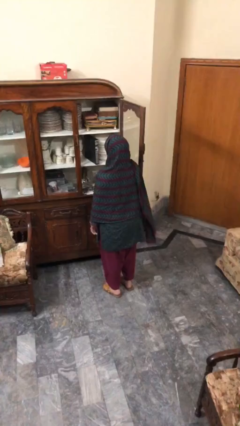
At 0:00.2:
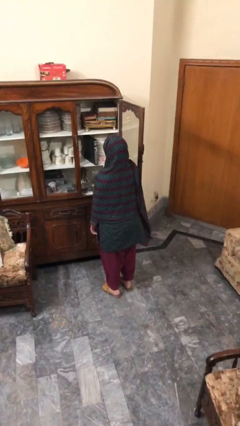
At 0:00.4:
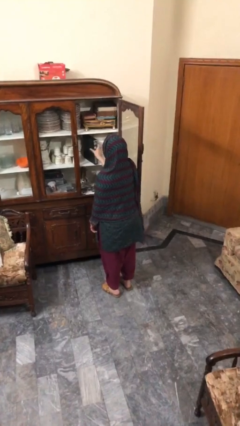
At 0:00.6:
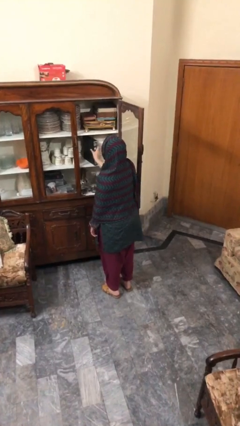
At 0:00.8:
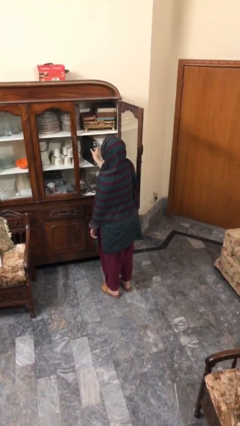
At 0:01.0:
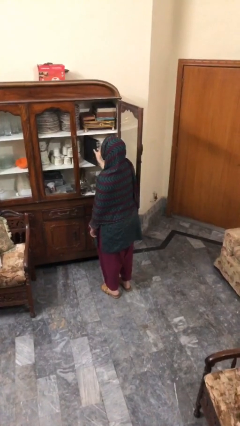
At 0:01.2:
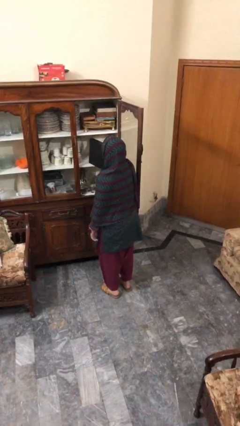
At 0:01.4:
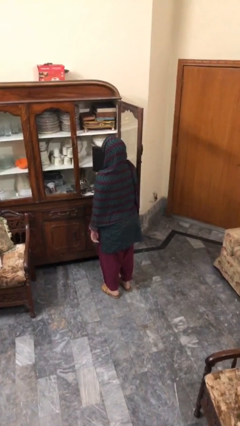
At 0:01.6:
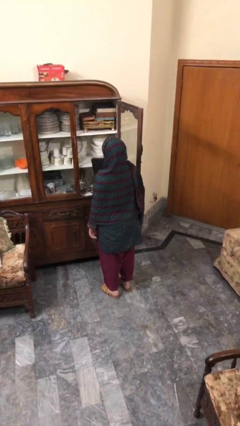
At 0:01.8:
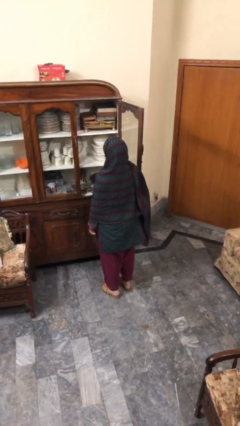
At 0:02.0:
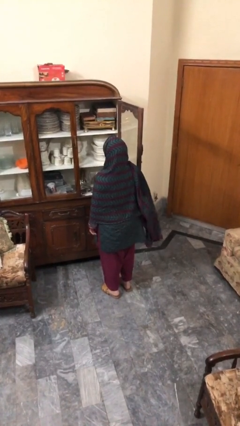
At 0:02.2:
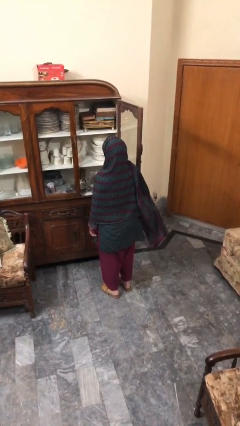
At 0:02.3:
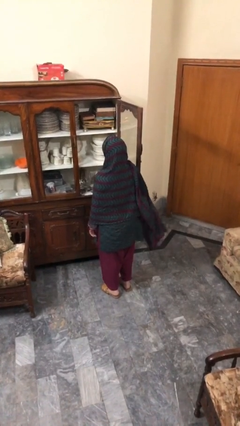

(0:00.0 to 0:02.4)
person picks up object from cabinet

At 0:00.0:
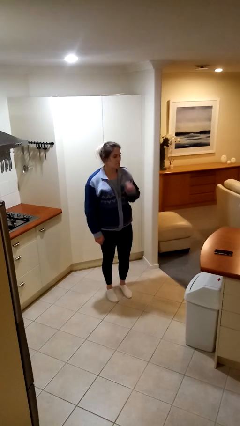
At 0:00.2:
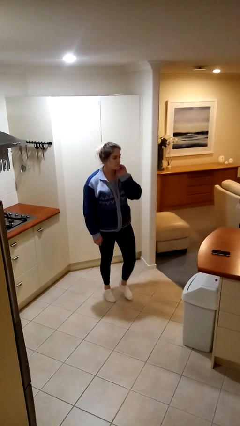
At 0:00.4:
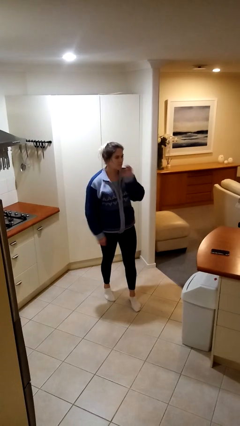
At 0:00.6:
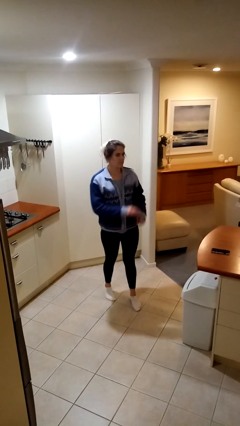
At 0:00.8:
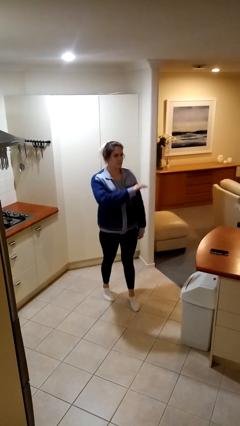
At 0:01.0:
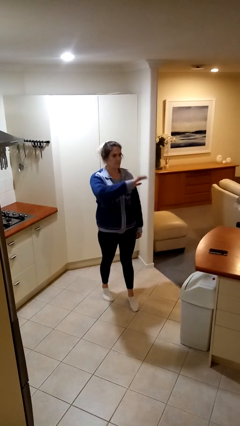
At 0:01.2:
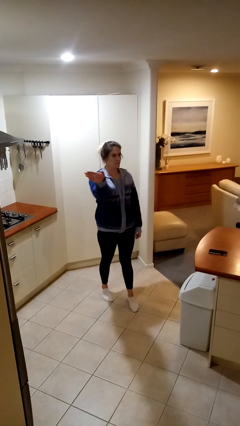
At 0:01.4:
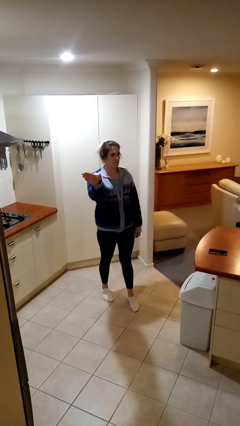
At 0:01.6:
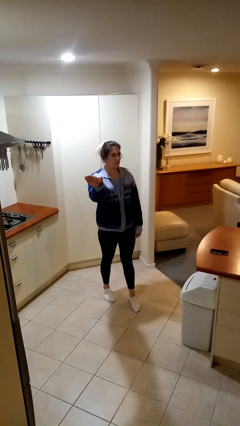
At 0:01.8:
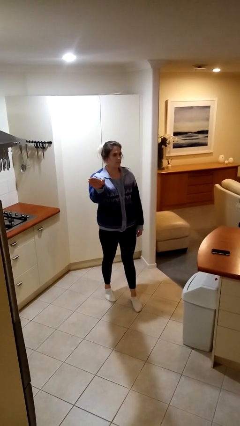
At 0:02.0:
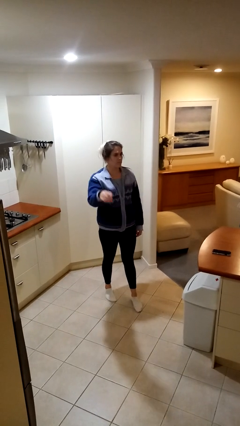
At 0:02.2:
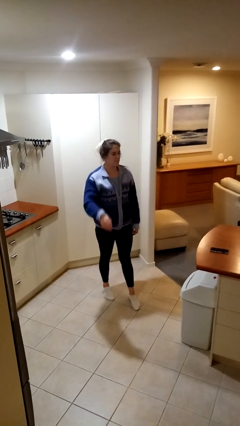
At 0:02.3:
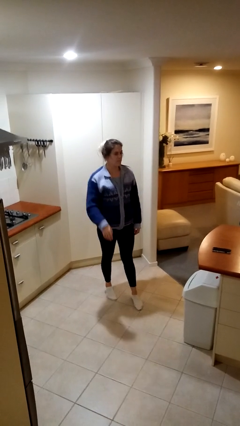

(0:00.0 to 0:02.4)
person gestures swipe right

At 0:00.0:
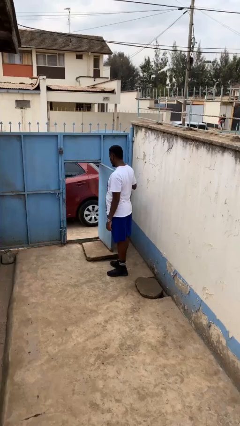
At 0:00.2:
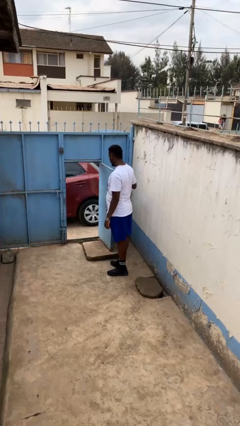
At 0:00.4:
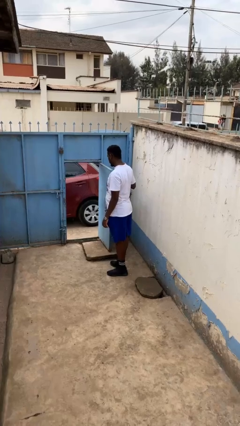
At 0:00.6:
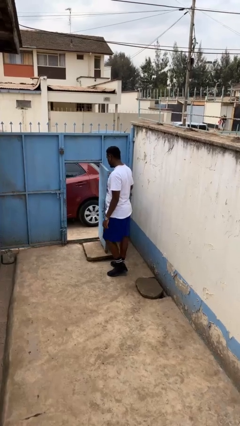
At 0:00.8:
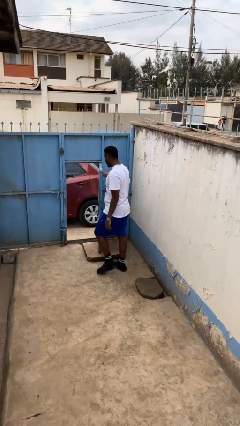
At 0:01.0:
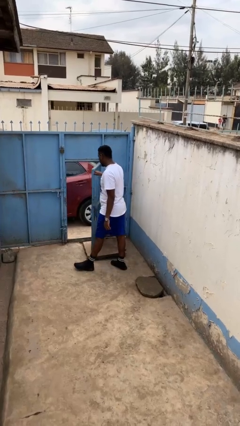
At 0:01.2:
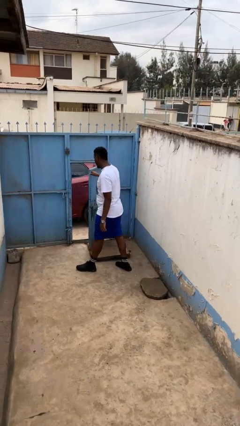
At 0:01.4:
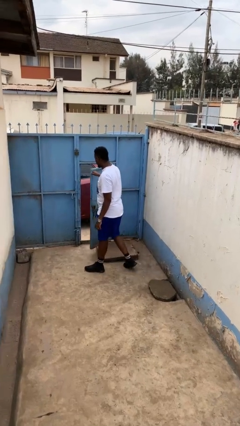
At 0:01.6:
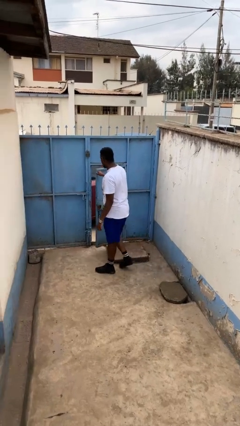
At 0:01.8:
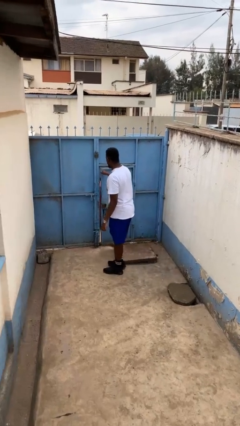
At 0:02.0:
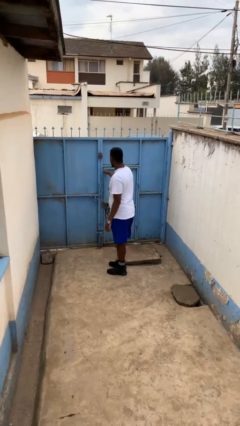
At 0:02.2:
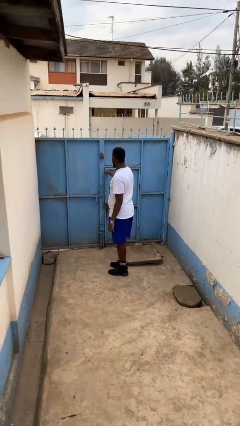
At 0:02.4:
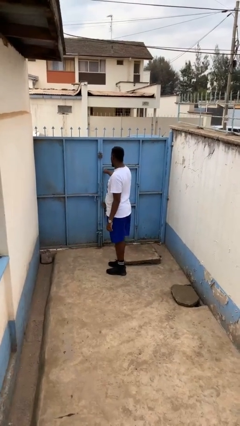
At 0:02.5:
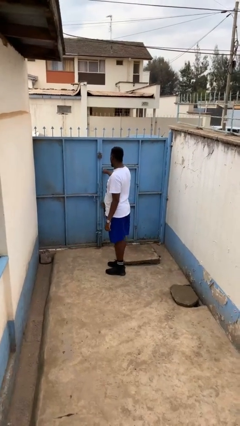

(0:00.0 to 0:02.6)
person closes gate

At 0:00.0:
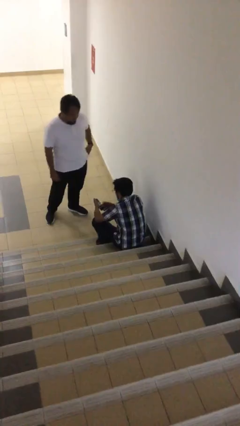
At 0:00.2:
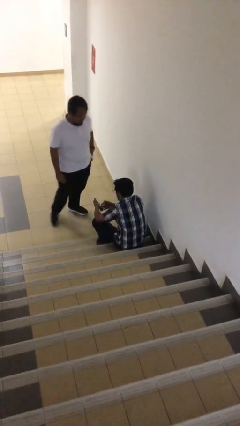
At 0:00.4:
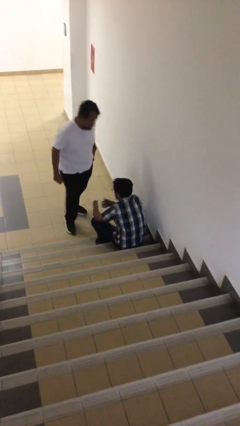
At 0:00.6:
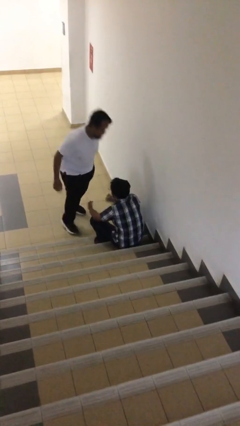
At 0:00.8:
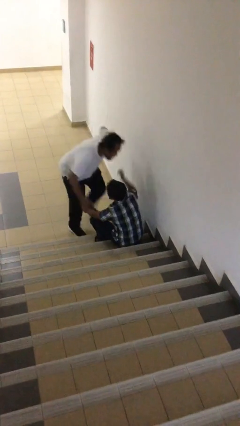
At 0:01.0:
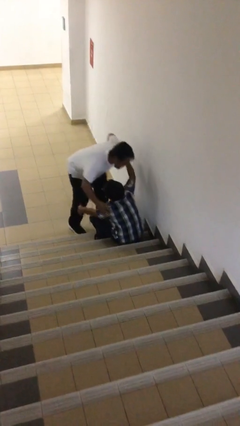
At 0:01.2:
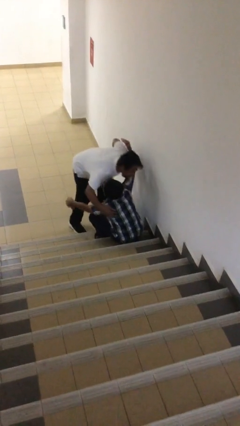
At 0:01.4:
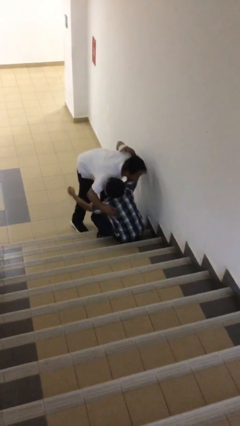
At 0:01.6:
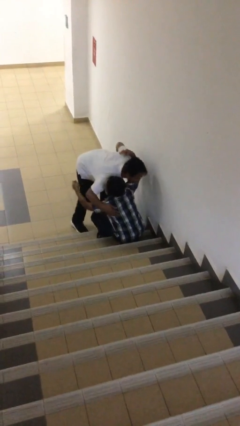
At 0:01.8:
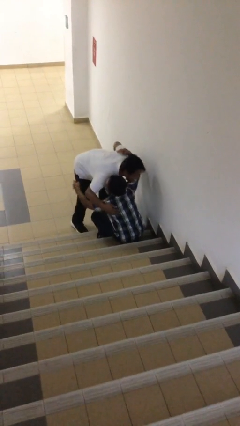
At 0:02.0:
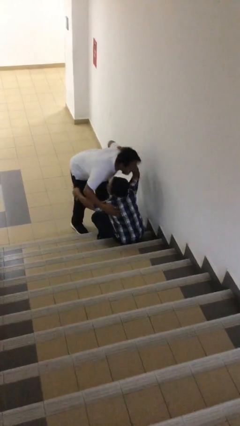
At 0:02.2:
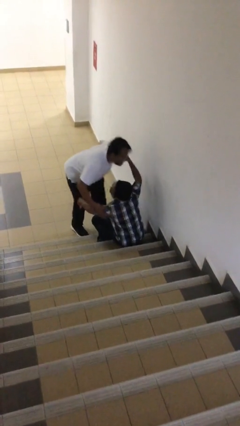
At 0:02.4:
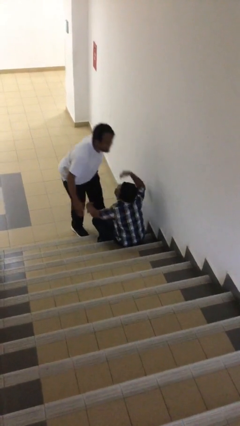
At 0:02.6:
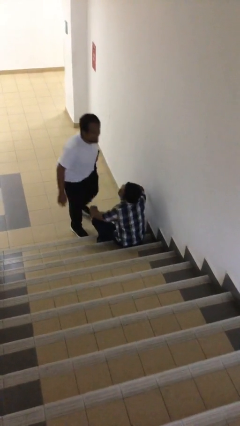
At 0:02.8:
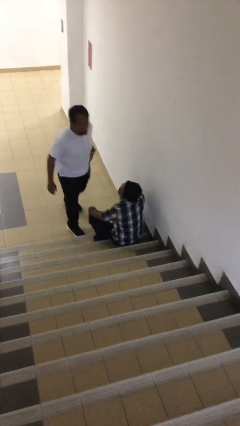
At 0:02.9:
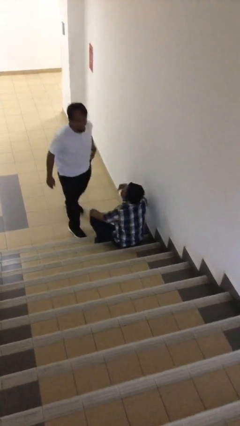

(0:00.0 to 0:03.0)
person embraces person

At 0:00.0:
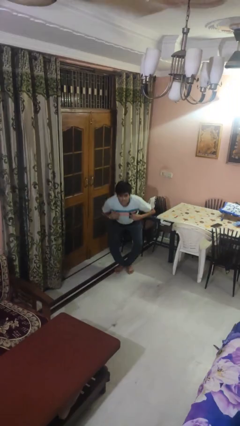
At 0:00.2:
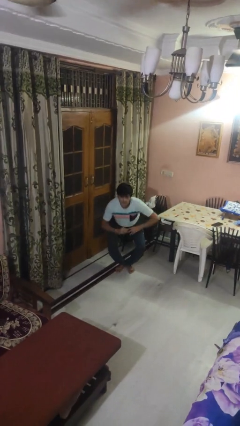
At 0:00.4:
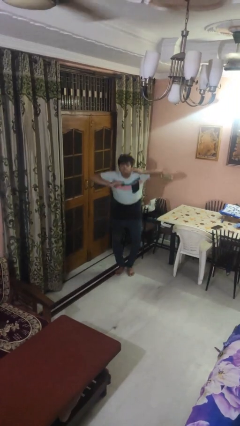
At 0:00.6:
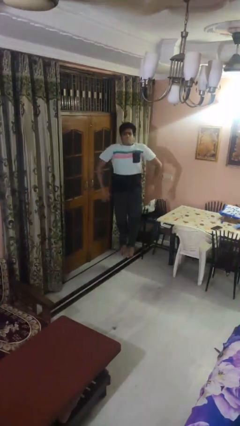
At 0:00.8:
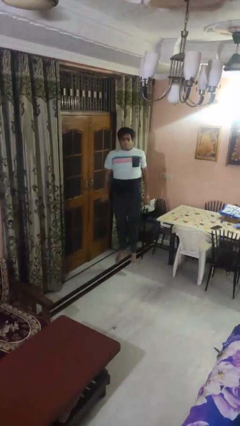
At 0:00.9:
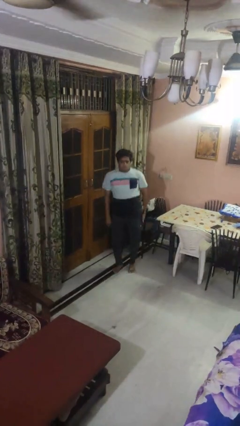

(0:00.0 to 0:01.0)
person jumps

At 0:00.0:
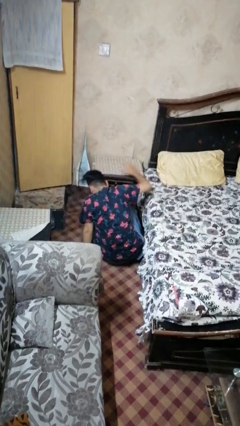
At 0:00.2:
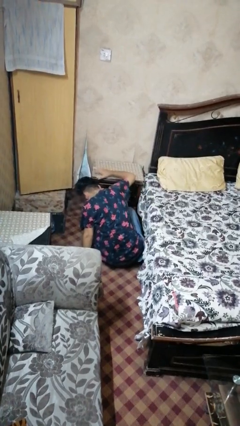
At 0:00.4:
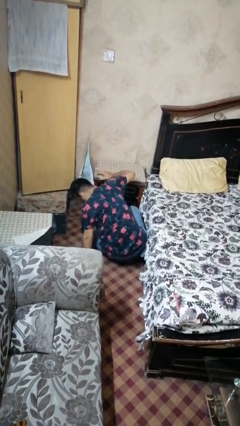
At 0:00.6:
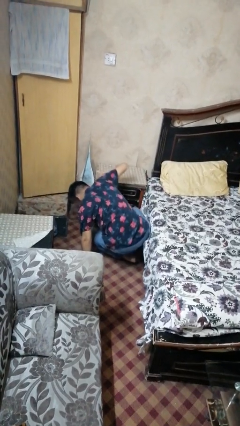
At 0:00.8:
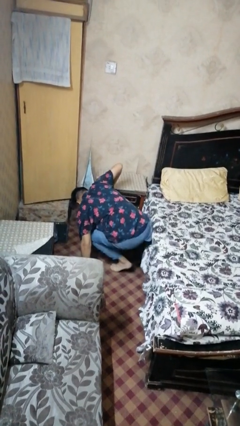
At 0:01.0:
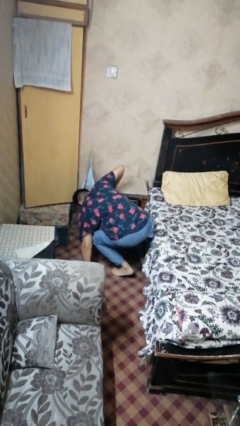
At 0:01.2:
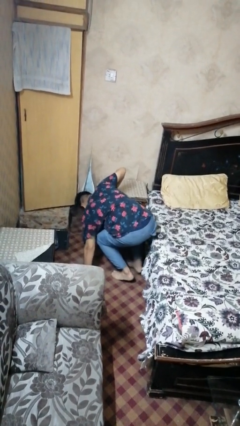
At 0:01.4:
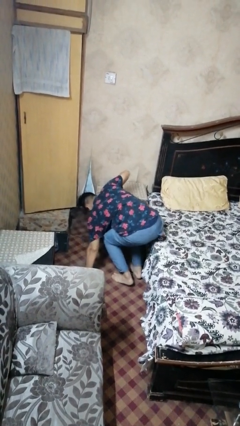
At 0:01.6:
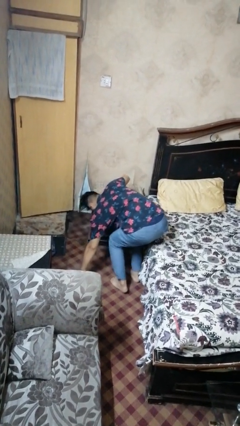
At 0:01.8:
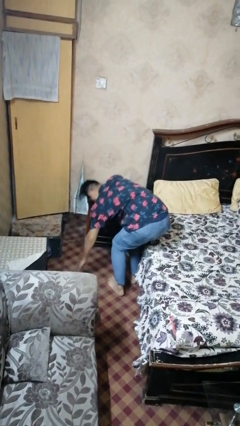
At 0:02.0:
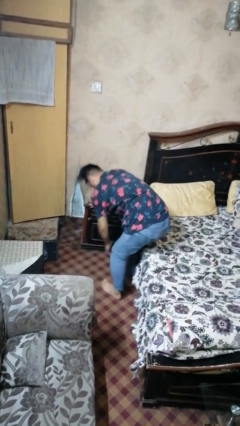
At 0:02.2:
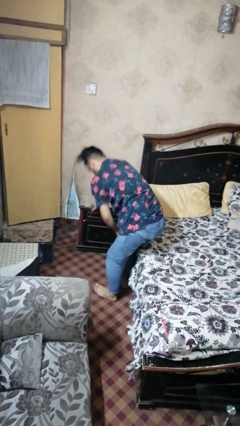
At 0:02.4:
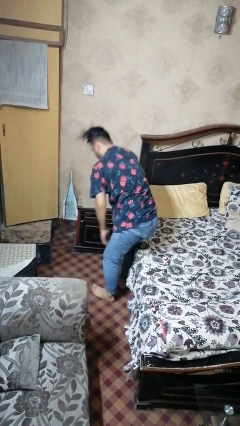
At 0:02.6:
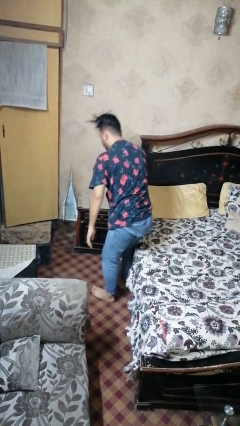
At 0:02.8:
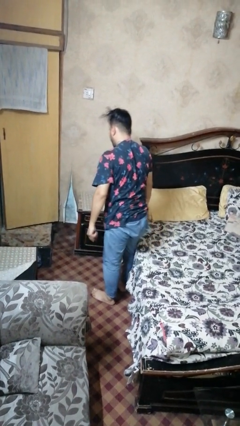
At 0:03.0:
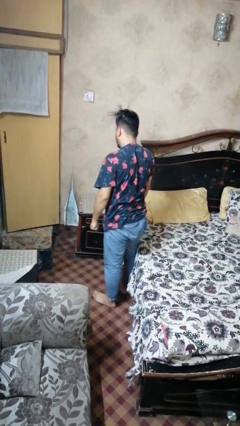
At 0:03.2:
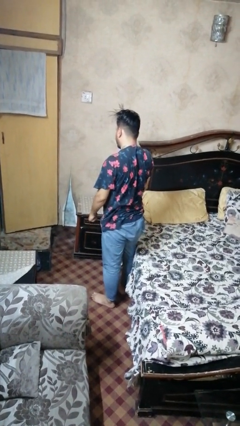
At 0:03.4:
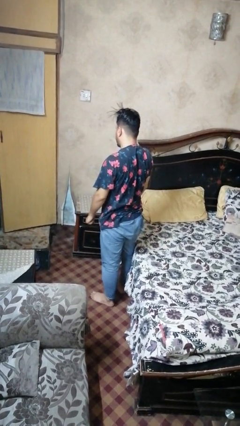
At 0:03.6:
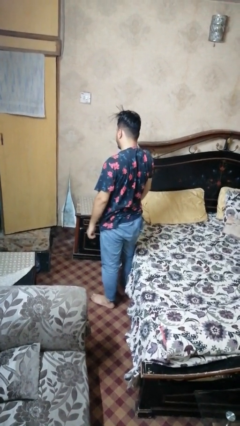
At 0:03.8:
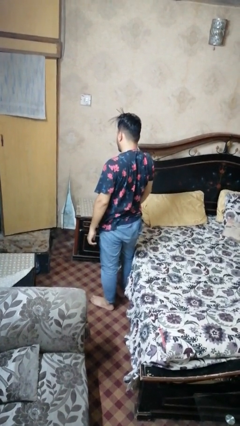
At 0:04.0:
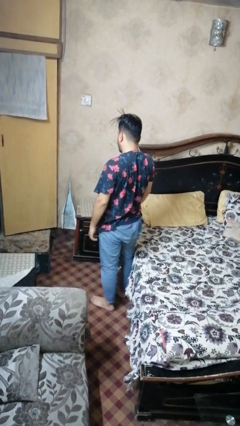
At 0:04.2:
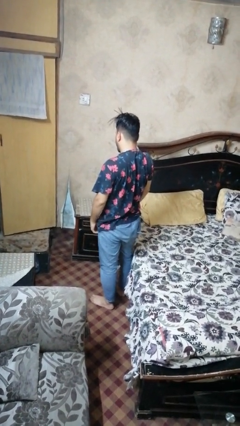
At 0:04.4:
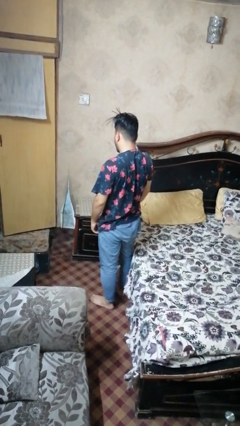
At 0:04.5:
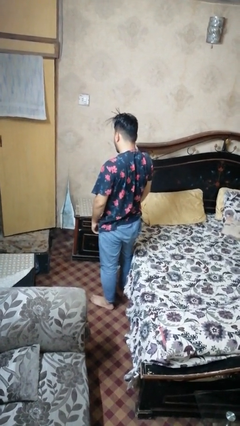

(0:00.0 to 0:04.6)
person stands up from floor

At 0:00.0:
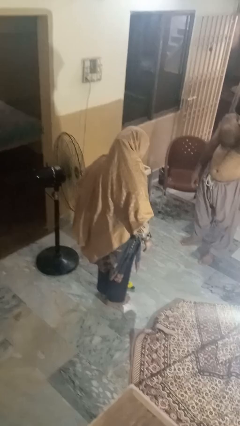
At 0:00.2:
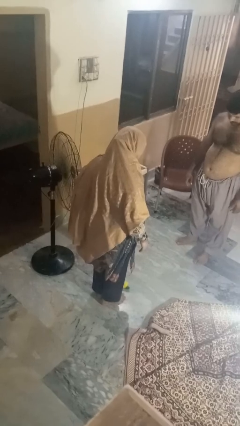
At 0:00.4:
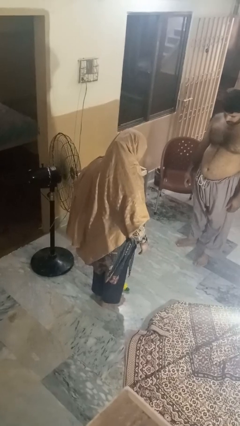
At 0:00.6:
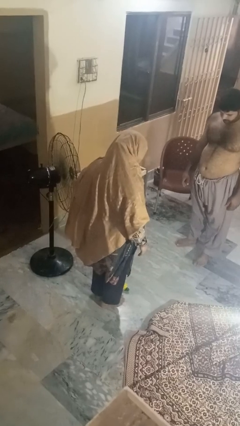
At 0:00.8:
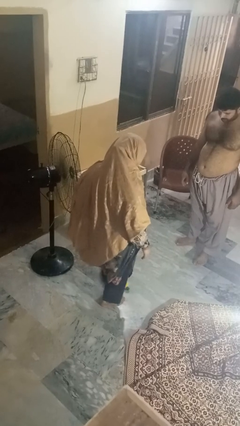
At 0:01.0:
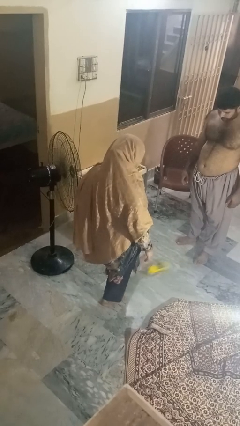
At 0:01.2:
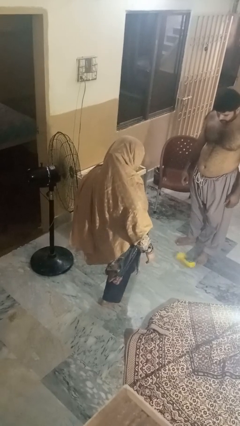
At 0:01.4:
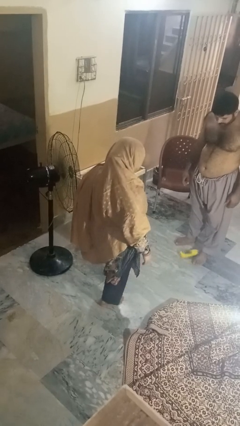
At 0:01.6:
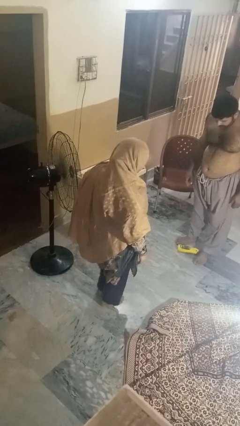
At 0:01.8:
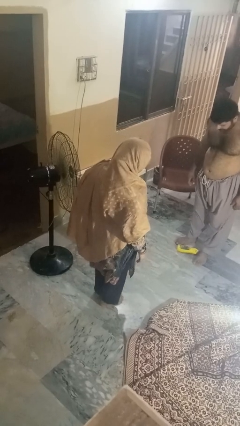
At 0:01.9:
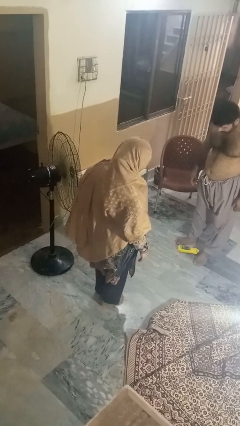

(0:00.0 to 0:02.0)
person kicks object to person
